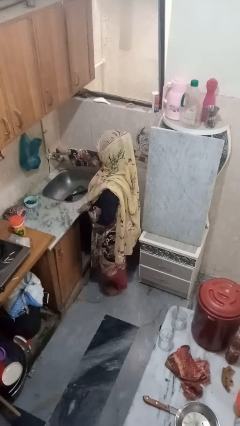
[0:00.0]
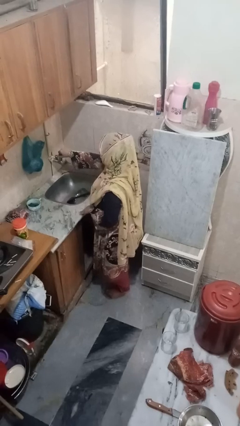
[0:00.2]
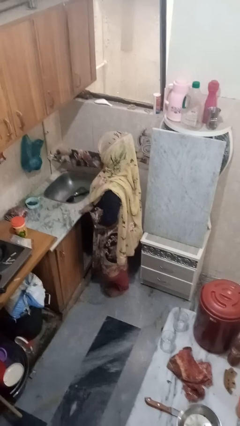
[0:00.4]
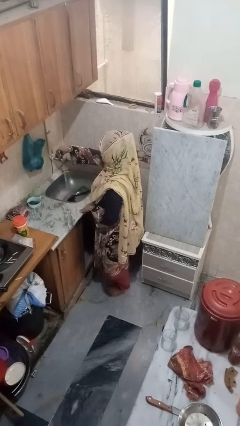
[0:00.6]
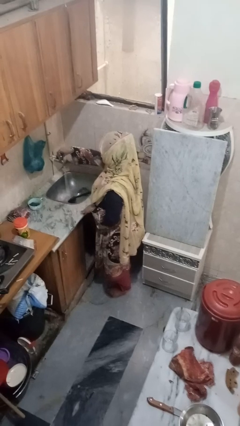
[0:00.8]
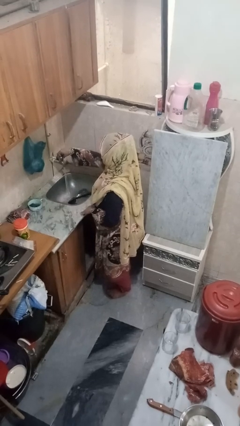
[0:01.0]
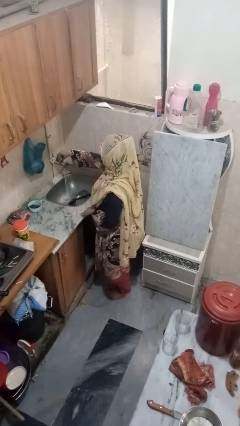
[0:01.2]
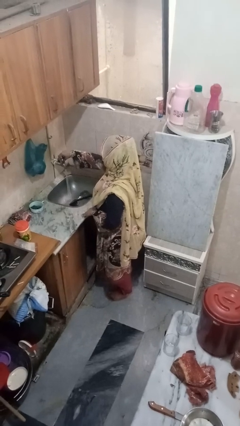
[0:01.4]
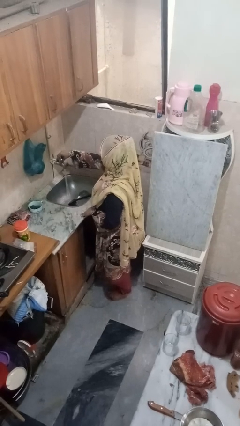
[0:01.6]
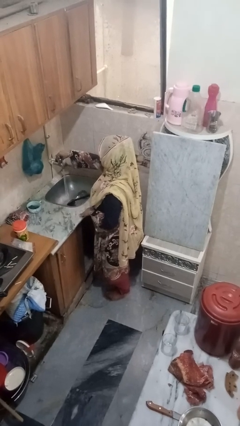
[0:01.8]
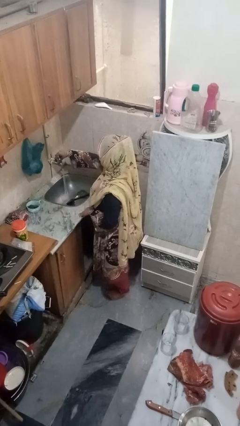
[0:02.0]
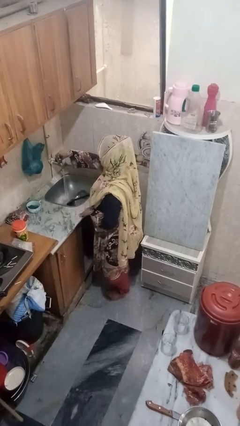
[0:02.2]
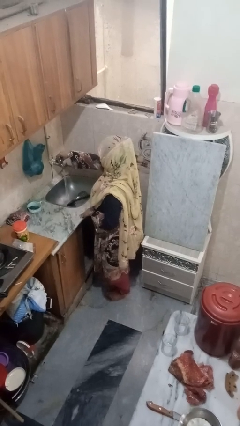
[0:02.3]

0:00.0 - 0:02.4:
person turns on faucet

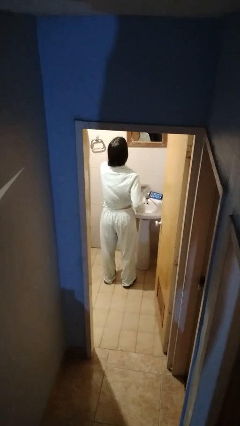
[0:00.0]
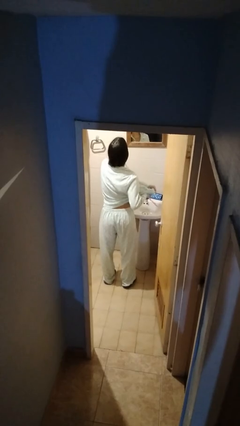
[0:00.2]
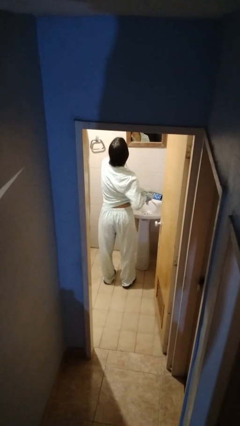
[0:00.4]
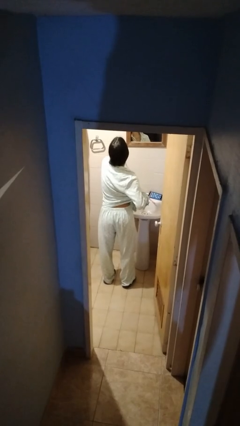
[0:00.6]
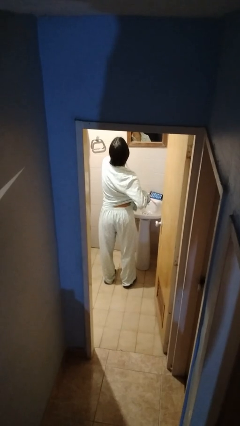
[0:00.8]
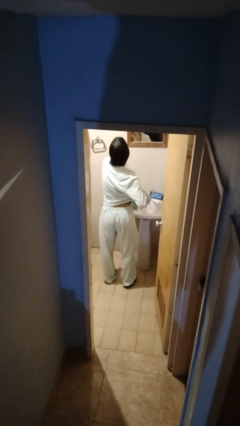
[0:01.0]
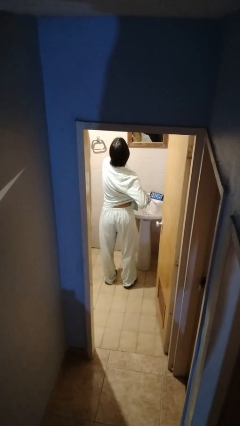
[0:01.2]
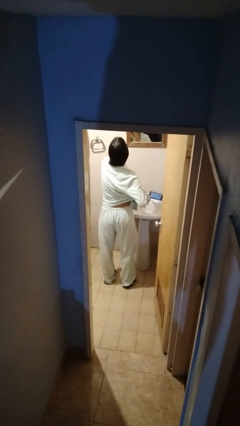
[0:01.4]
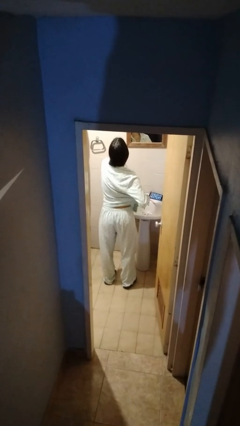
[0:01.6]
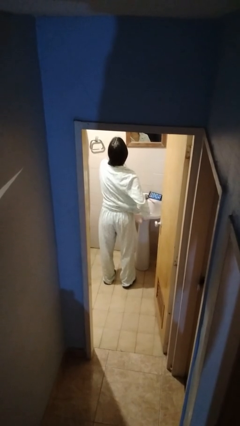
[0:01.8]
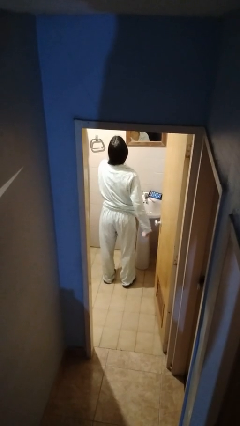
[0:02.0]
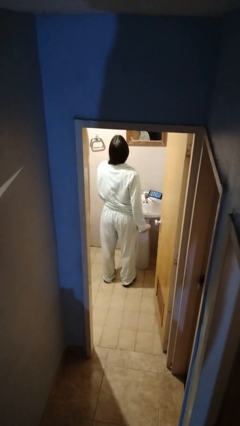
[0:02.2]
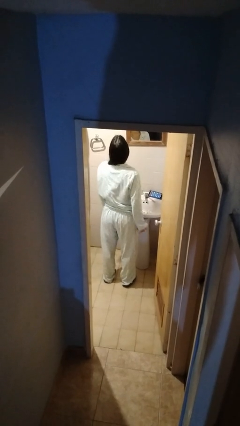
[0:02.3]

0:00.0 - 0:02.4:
person applies deodorant

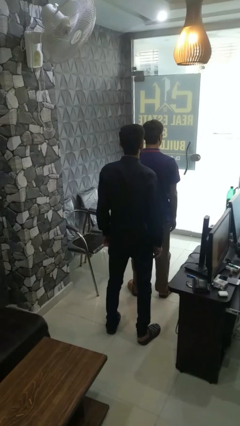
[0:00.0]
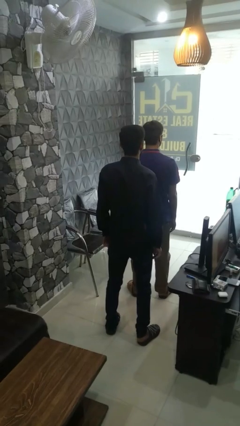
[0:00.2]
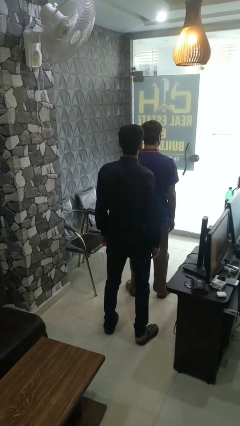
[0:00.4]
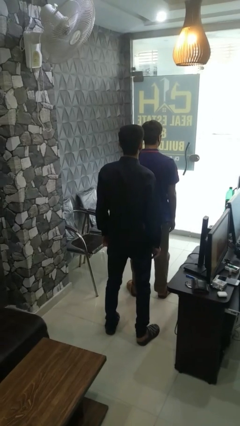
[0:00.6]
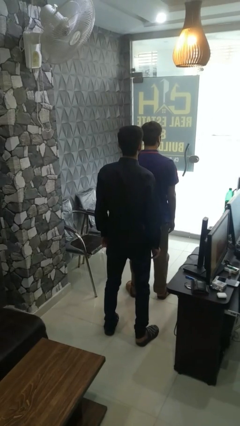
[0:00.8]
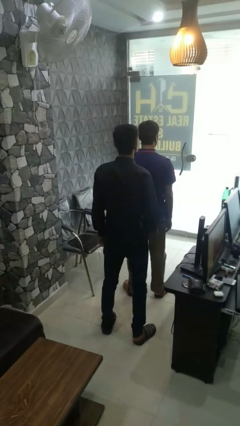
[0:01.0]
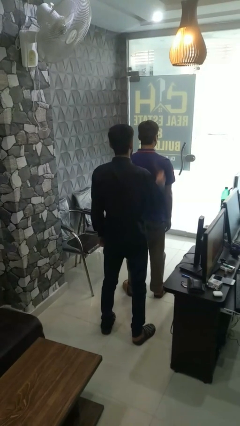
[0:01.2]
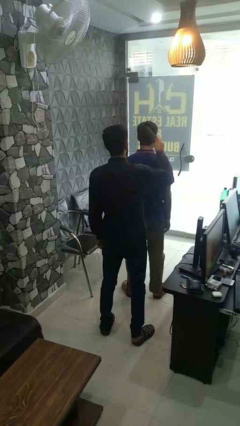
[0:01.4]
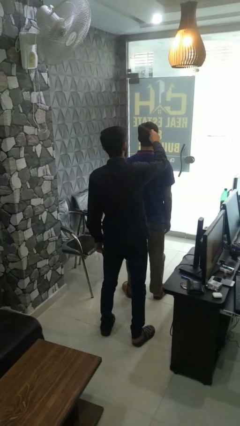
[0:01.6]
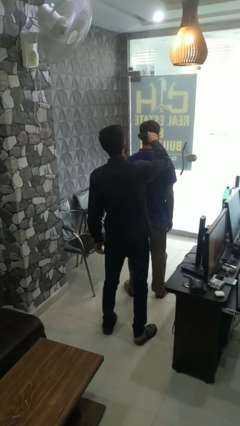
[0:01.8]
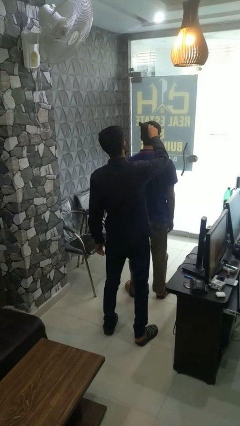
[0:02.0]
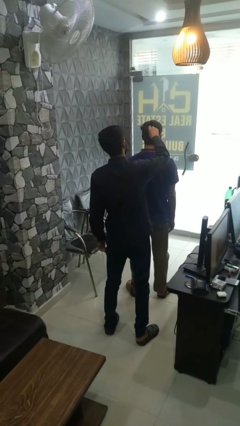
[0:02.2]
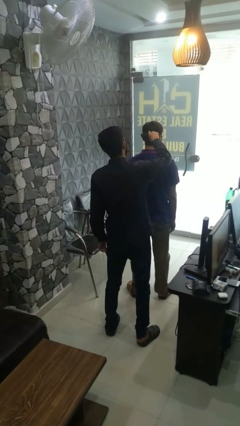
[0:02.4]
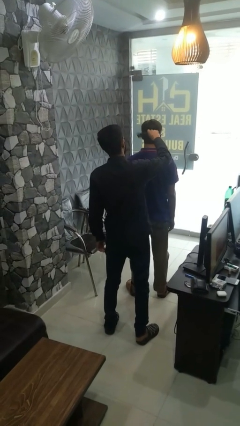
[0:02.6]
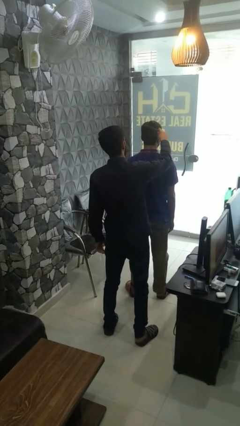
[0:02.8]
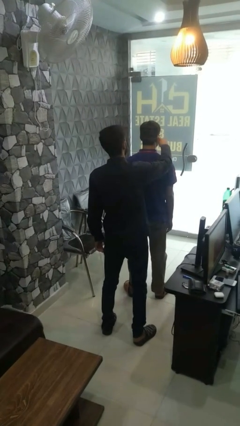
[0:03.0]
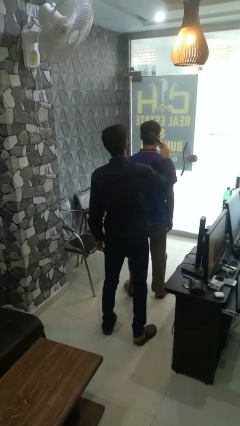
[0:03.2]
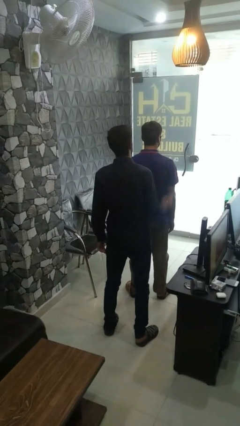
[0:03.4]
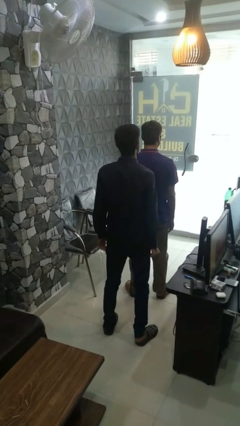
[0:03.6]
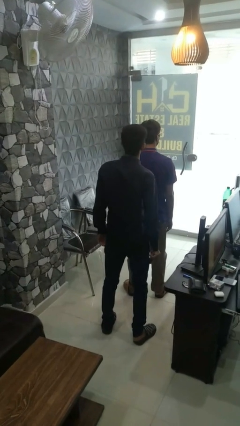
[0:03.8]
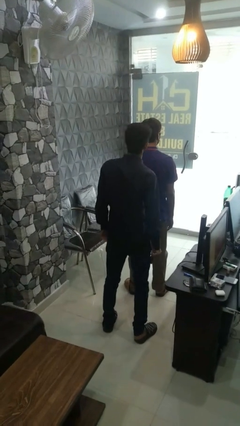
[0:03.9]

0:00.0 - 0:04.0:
person brushes hair of person

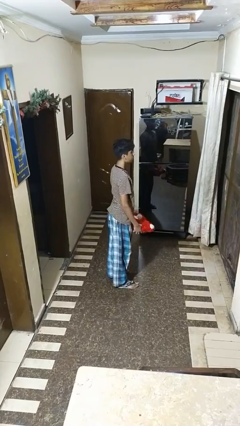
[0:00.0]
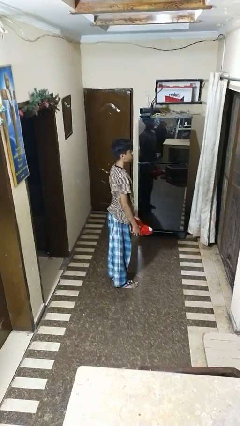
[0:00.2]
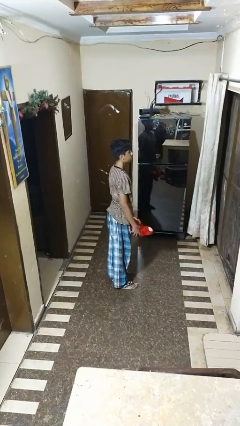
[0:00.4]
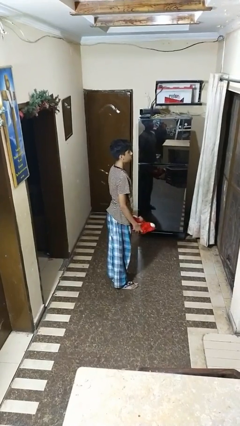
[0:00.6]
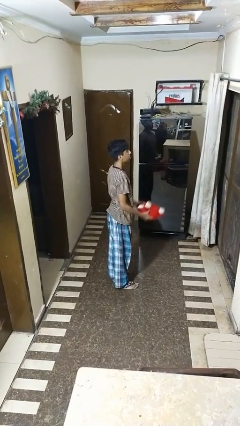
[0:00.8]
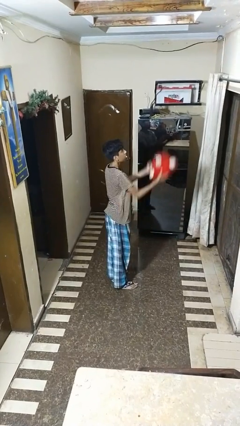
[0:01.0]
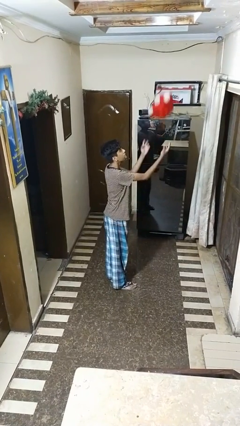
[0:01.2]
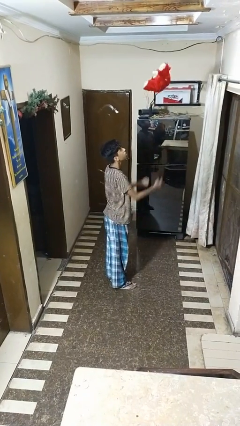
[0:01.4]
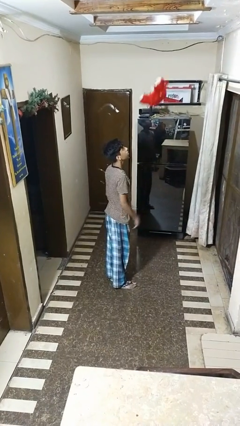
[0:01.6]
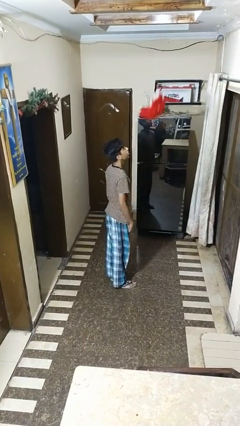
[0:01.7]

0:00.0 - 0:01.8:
person drops object

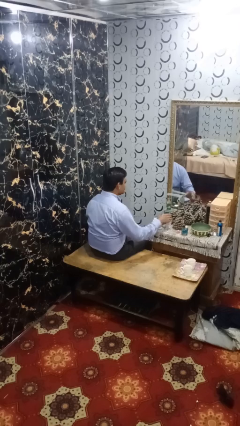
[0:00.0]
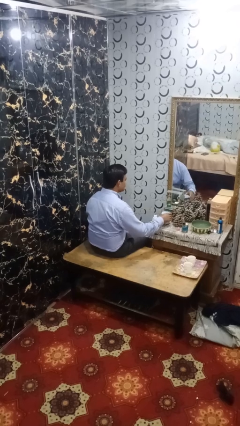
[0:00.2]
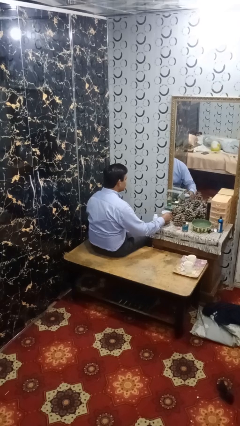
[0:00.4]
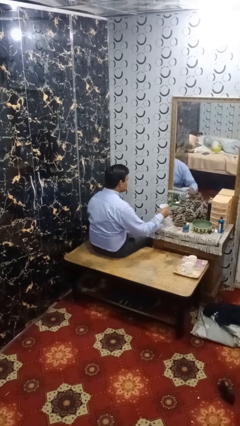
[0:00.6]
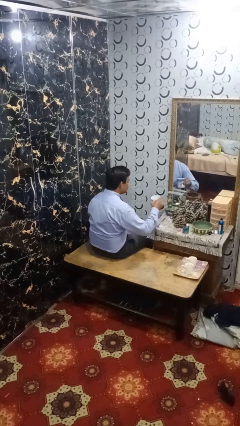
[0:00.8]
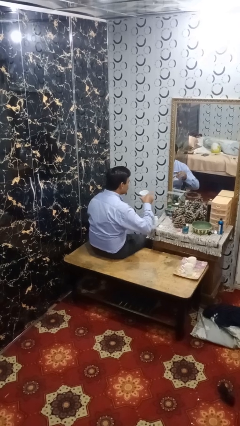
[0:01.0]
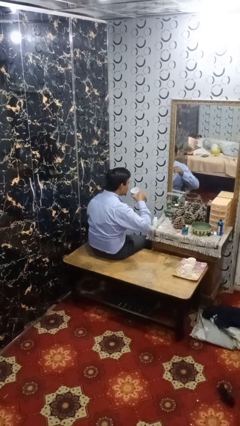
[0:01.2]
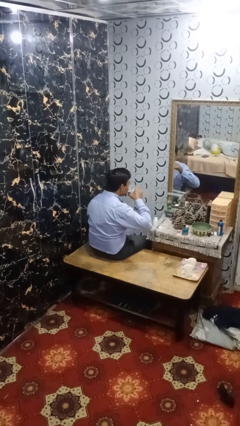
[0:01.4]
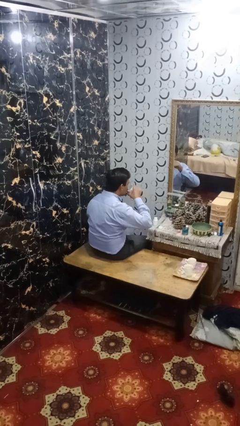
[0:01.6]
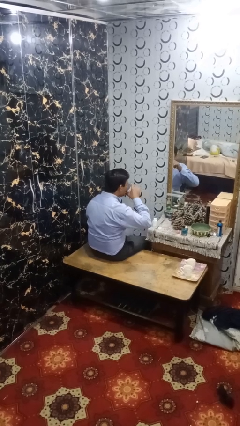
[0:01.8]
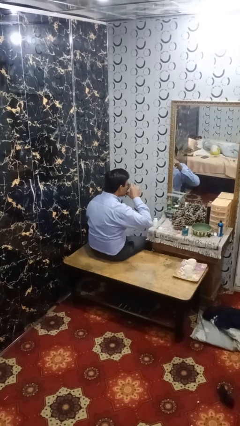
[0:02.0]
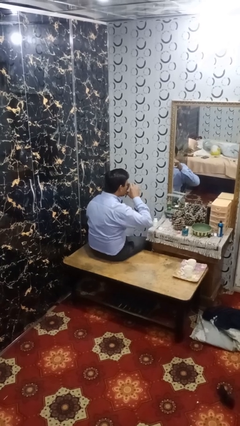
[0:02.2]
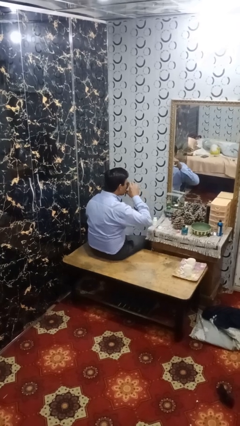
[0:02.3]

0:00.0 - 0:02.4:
person drinks from cup

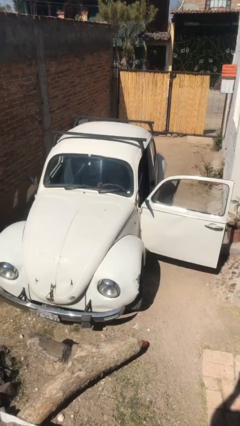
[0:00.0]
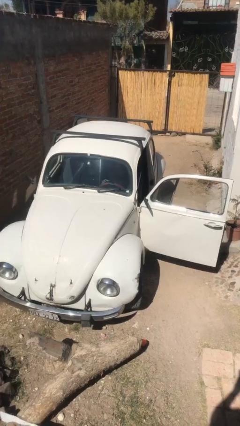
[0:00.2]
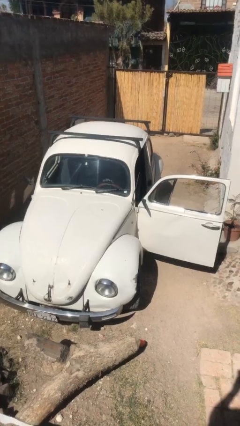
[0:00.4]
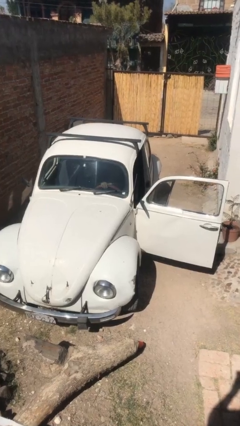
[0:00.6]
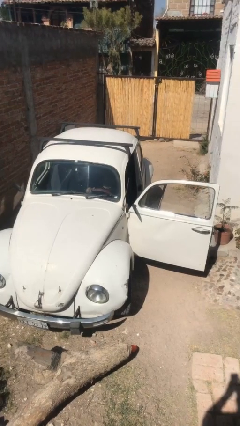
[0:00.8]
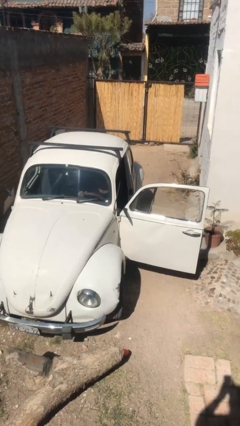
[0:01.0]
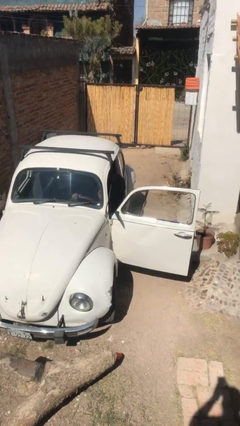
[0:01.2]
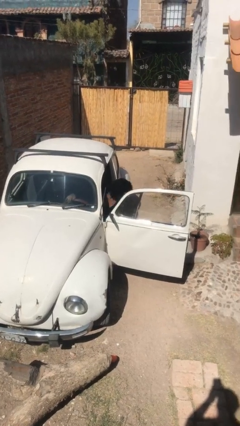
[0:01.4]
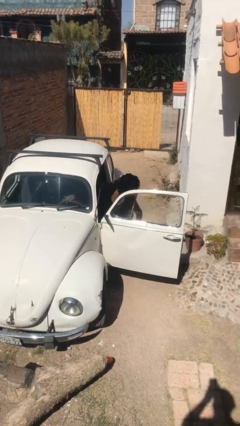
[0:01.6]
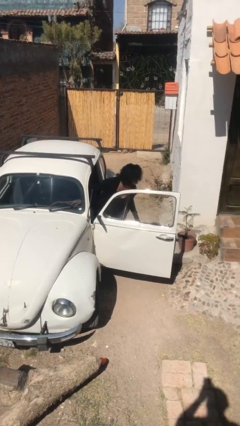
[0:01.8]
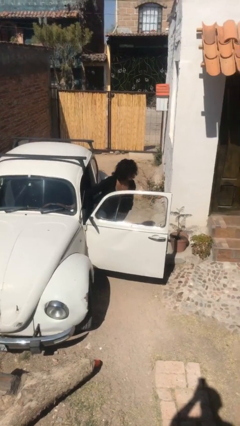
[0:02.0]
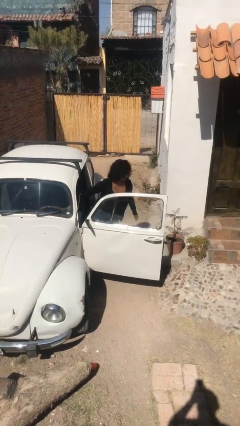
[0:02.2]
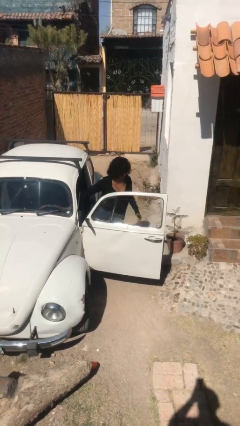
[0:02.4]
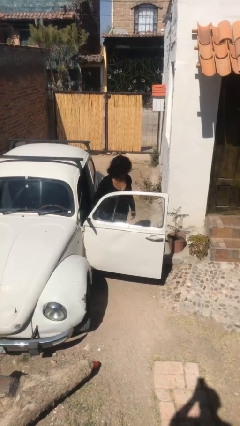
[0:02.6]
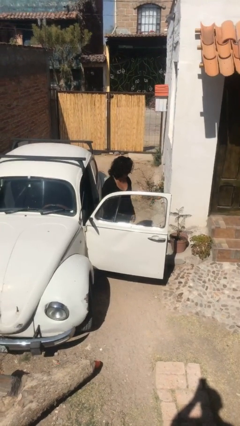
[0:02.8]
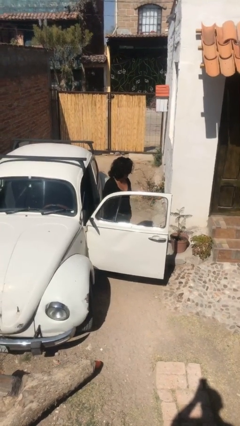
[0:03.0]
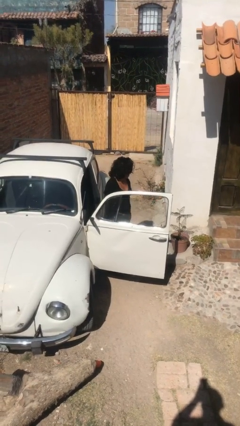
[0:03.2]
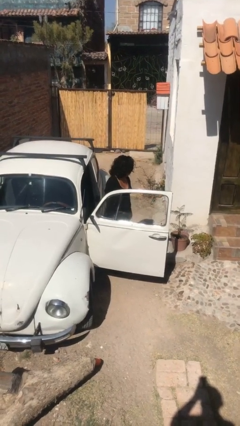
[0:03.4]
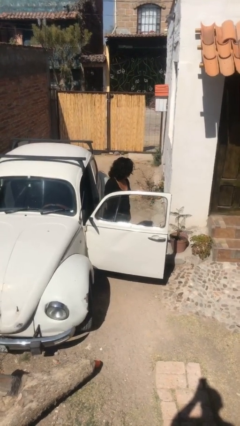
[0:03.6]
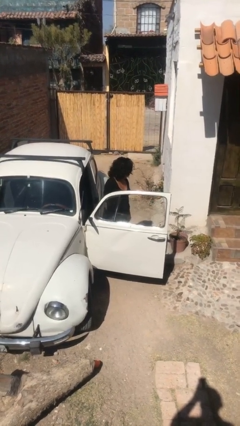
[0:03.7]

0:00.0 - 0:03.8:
person exits car

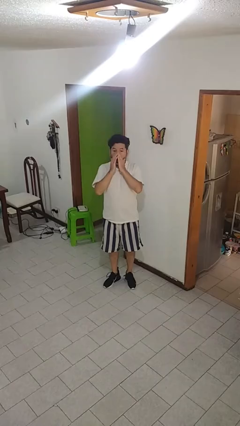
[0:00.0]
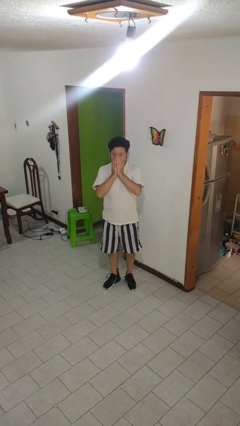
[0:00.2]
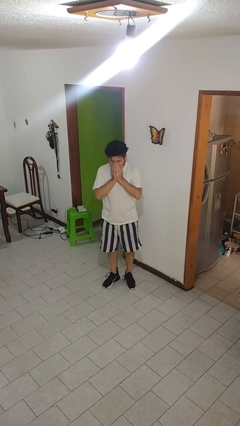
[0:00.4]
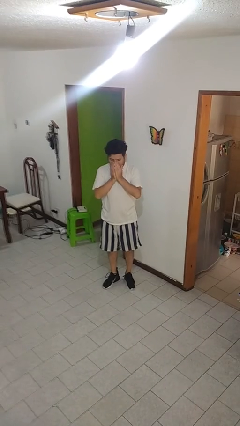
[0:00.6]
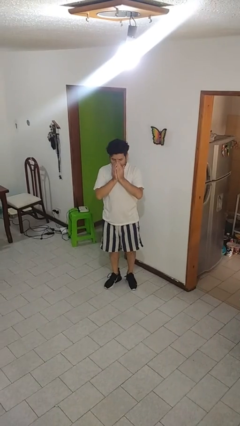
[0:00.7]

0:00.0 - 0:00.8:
person sneezes into hand
